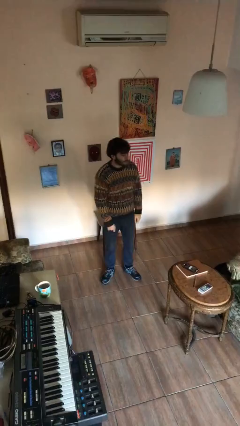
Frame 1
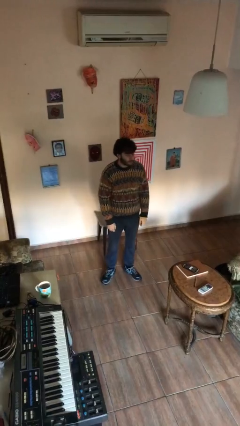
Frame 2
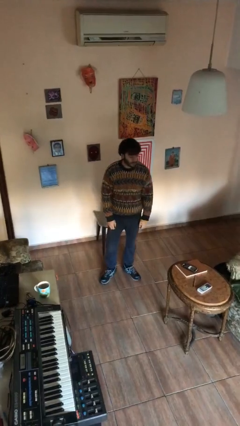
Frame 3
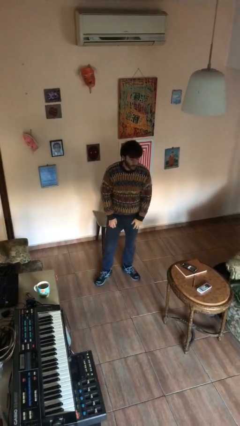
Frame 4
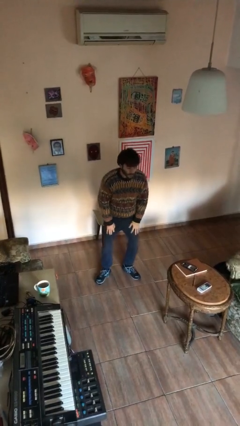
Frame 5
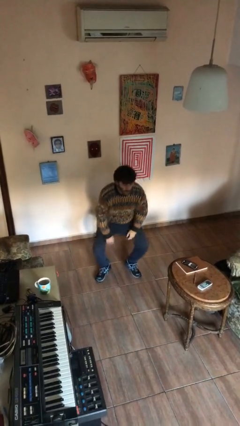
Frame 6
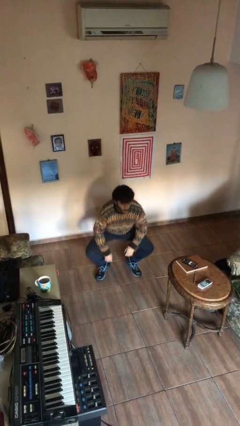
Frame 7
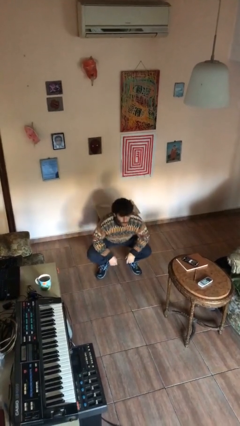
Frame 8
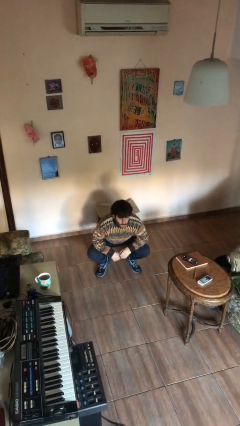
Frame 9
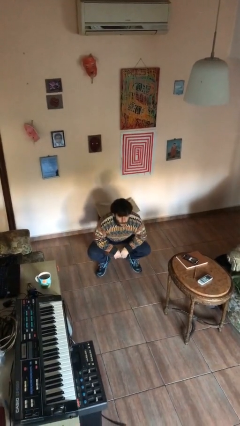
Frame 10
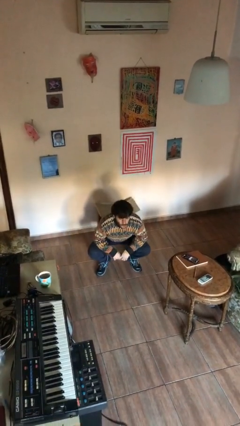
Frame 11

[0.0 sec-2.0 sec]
person squats

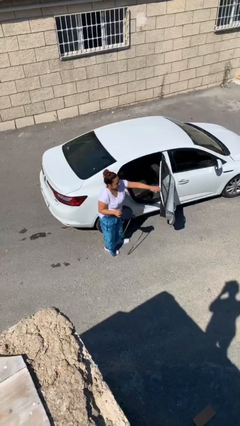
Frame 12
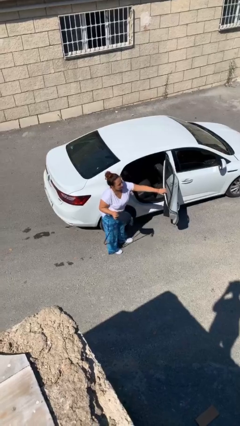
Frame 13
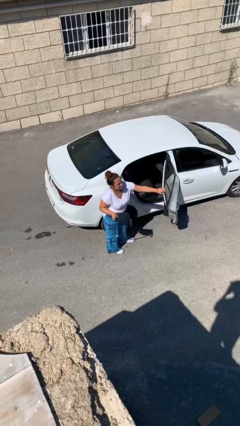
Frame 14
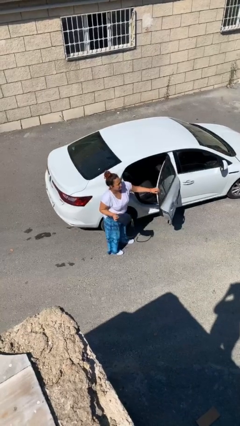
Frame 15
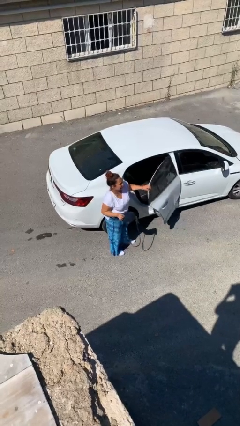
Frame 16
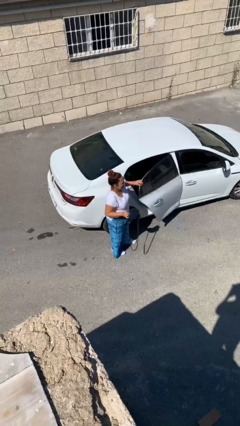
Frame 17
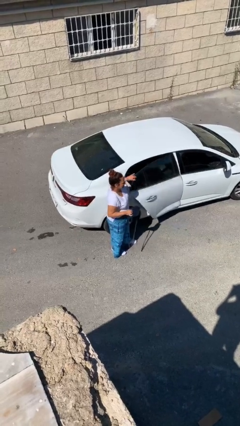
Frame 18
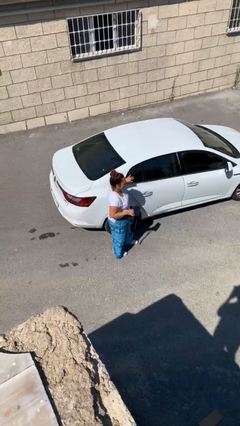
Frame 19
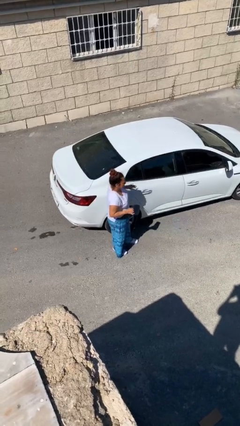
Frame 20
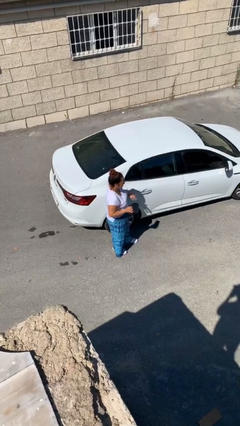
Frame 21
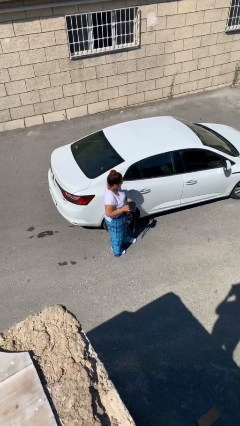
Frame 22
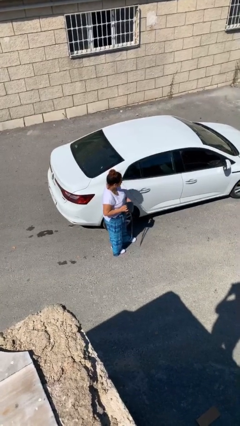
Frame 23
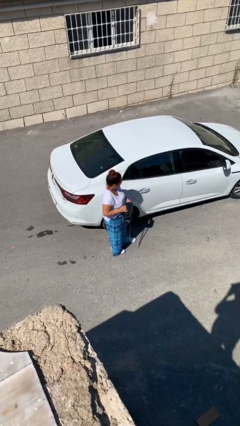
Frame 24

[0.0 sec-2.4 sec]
person closes car door

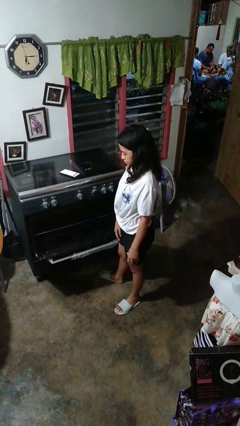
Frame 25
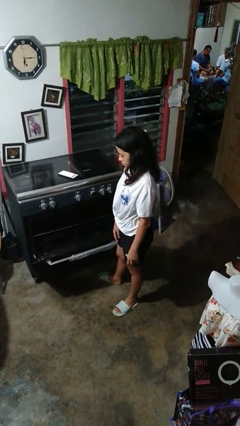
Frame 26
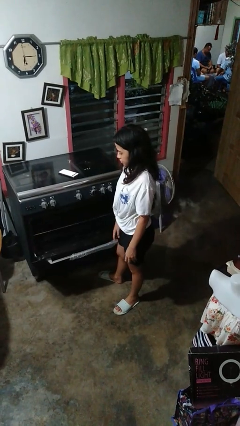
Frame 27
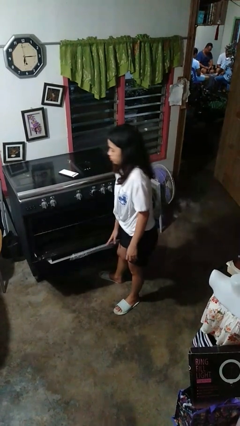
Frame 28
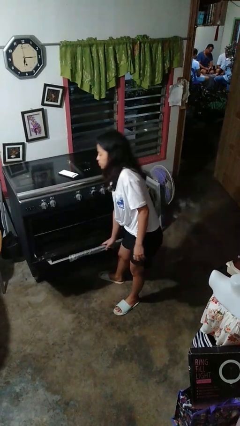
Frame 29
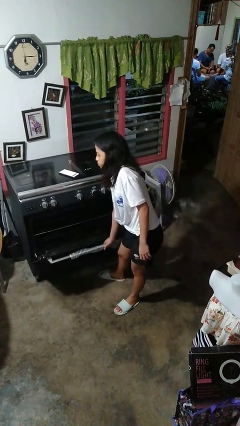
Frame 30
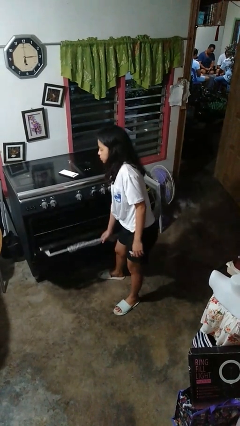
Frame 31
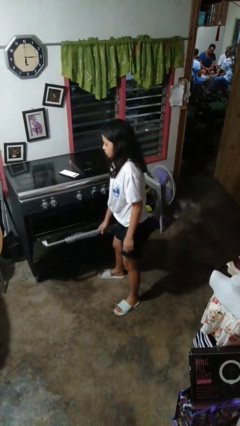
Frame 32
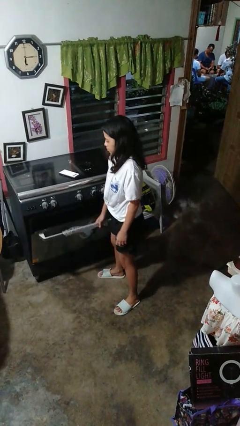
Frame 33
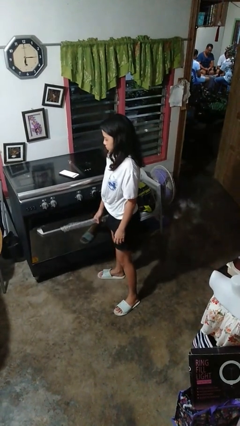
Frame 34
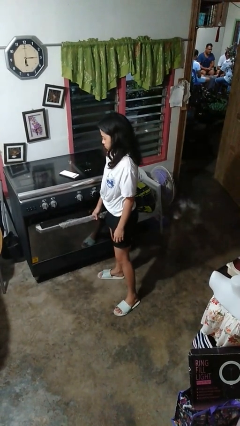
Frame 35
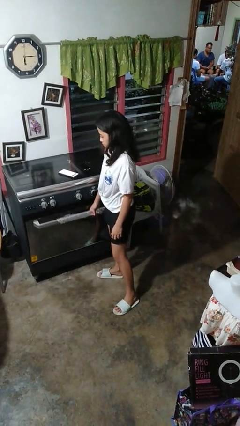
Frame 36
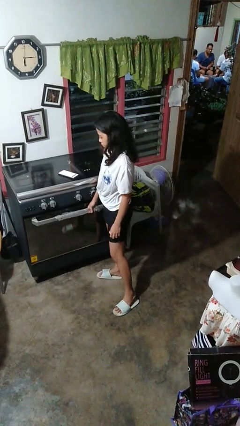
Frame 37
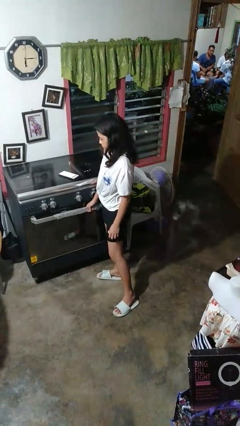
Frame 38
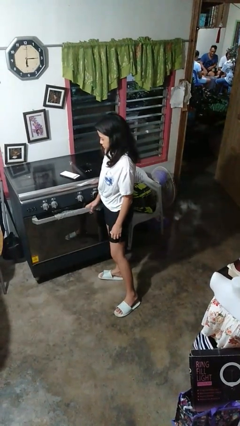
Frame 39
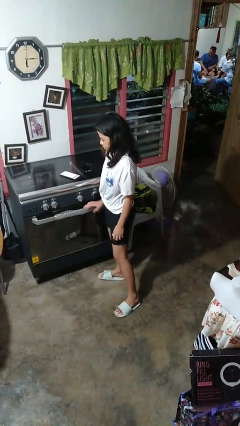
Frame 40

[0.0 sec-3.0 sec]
person closes oven door

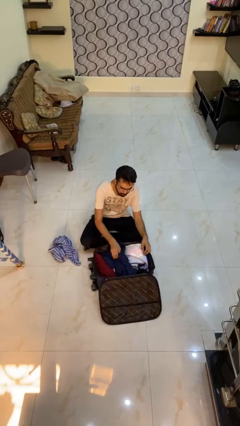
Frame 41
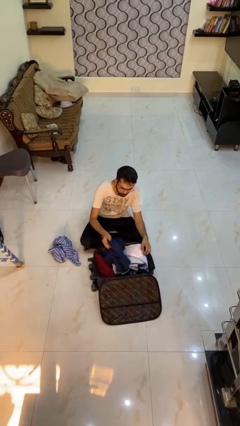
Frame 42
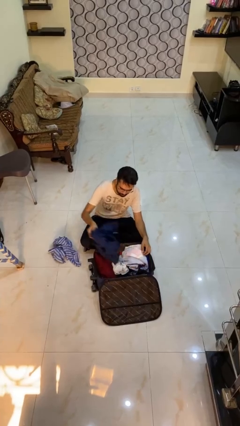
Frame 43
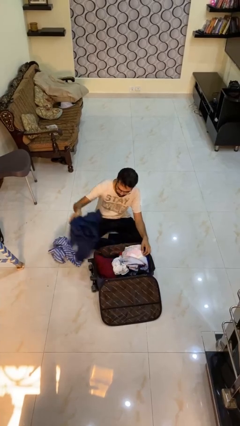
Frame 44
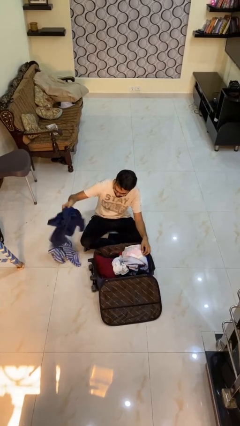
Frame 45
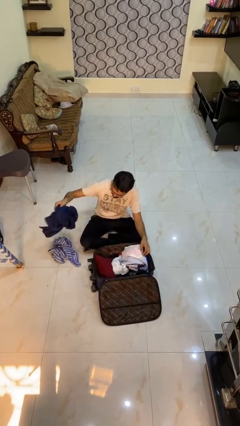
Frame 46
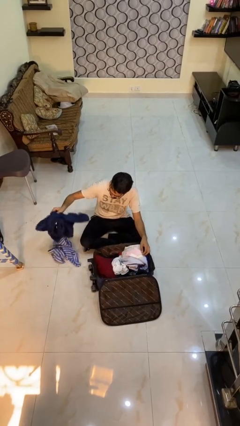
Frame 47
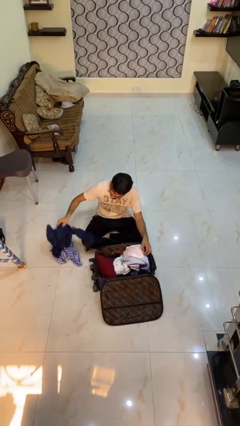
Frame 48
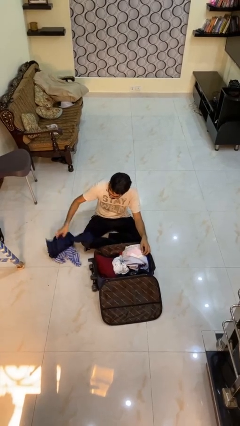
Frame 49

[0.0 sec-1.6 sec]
person unloads clothes from suitcase

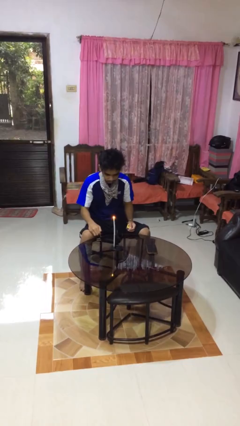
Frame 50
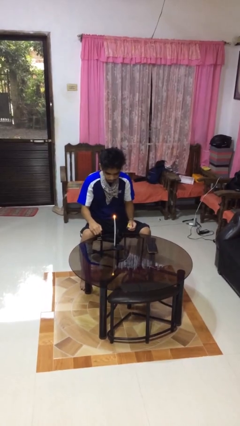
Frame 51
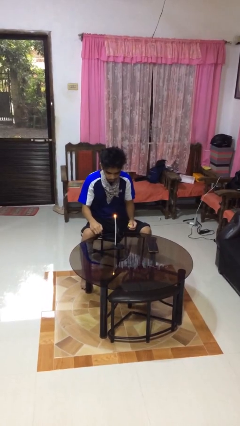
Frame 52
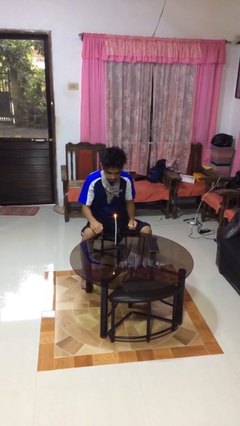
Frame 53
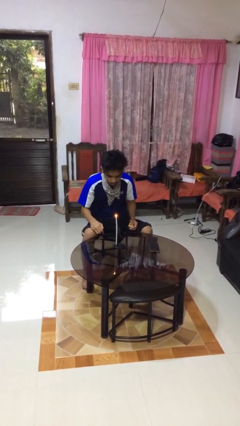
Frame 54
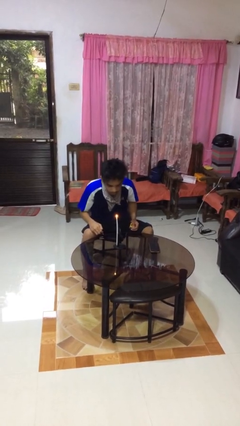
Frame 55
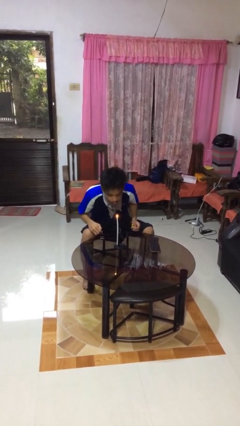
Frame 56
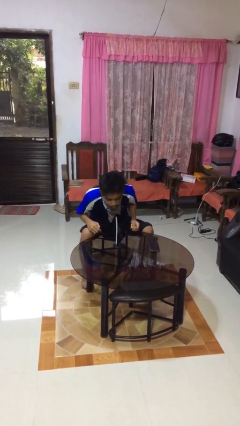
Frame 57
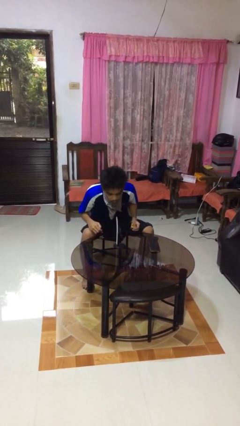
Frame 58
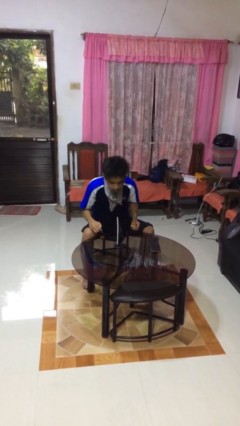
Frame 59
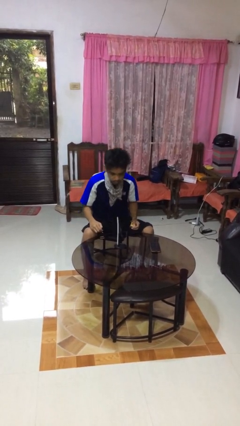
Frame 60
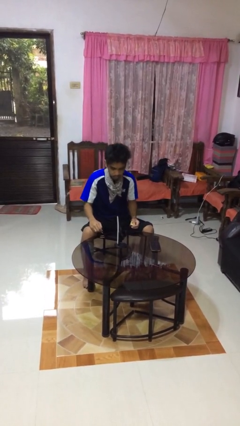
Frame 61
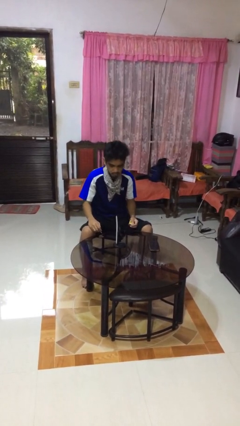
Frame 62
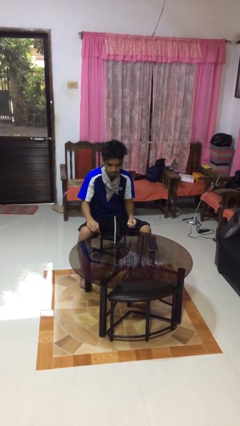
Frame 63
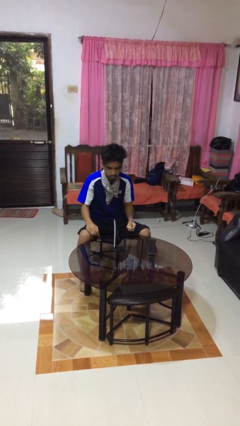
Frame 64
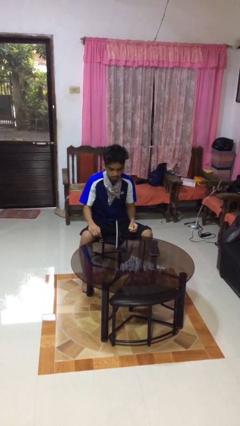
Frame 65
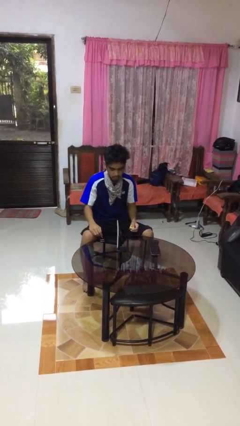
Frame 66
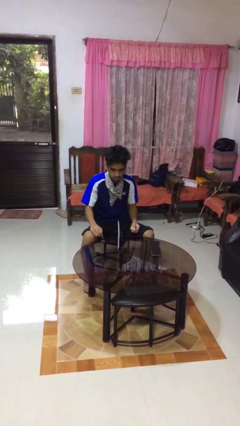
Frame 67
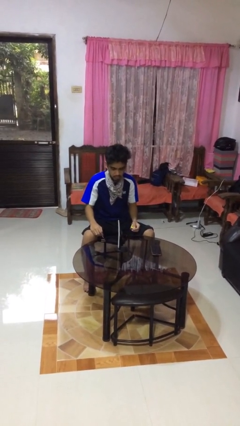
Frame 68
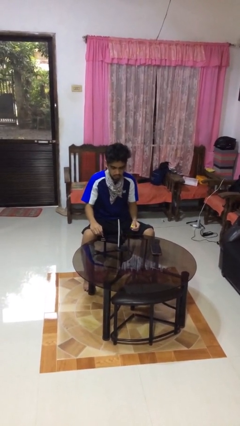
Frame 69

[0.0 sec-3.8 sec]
person extinguishes candle

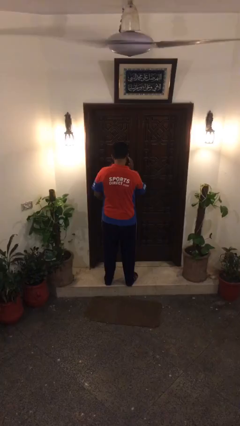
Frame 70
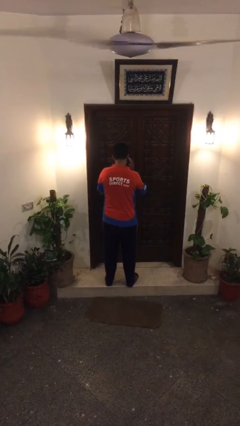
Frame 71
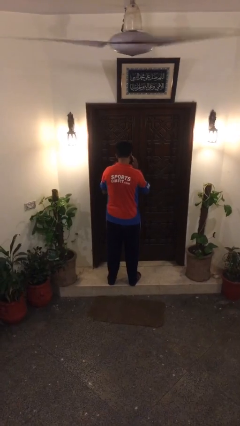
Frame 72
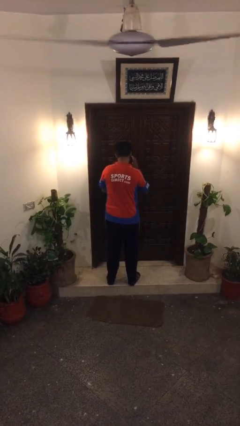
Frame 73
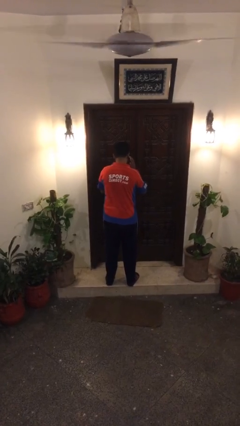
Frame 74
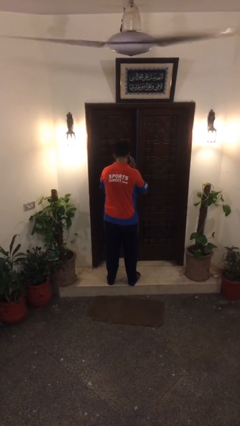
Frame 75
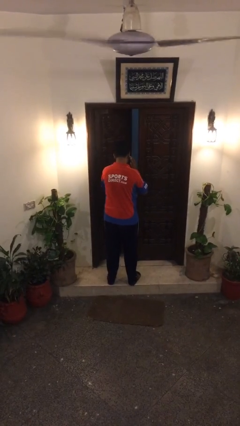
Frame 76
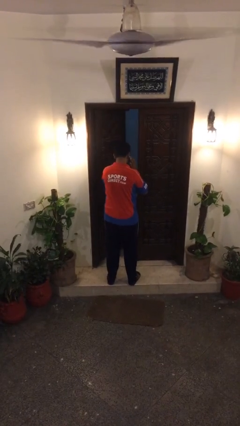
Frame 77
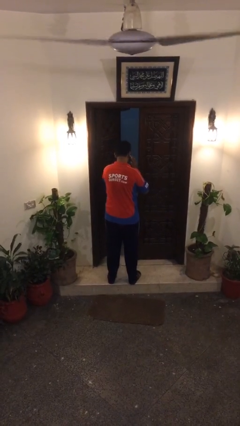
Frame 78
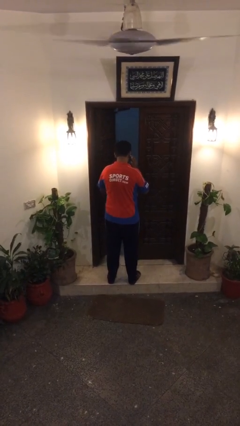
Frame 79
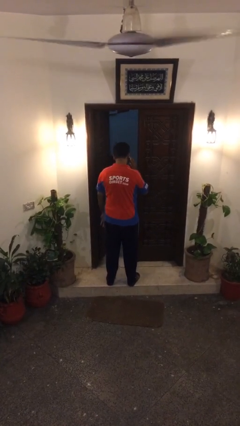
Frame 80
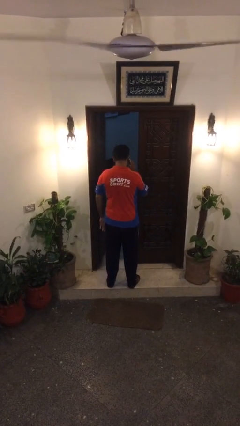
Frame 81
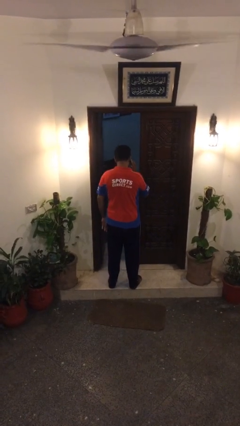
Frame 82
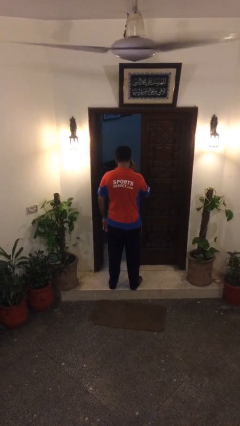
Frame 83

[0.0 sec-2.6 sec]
person opens facility door

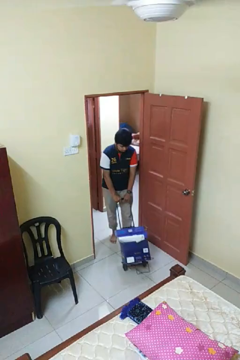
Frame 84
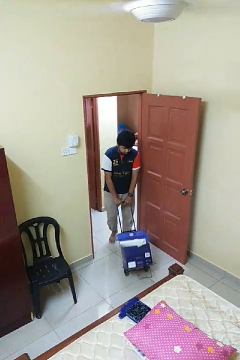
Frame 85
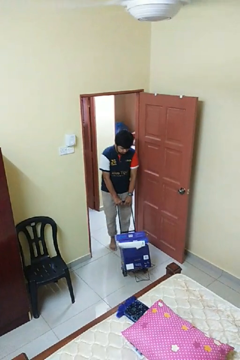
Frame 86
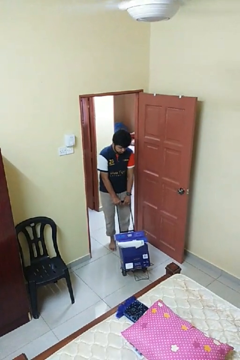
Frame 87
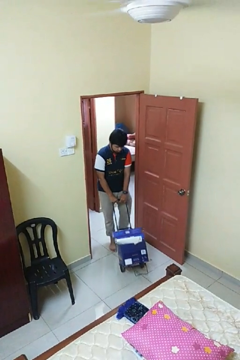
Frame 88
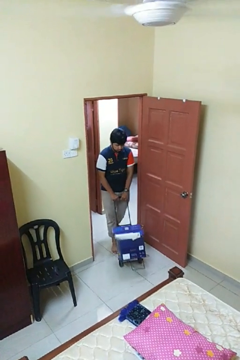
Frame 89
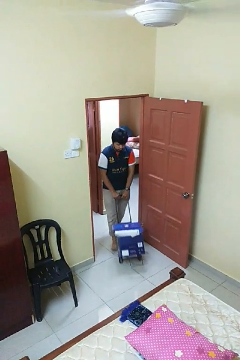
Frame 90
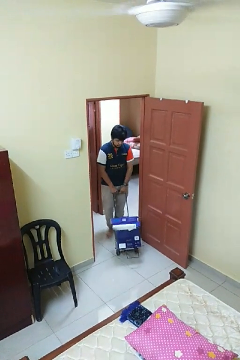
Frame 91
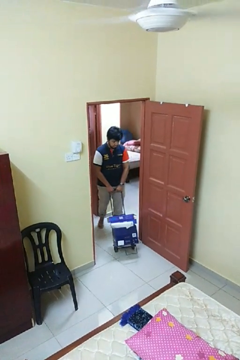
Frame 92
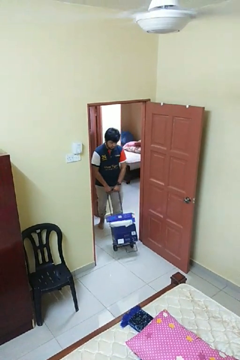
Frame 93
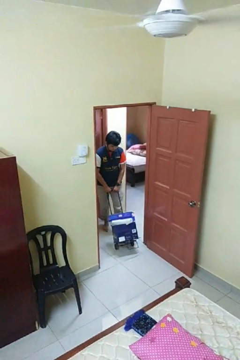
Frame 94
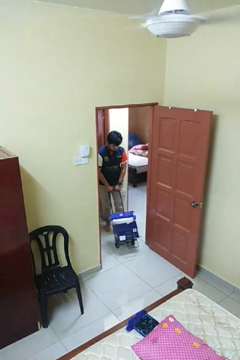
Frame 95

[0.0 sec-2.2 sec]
person pulls wheeled cart

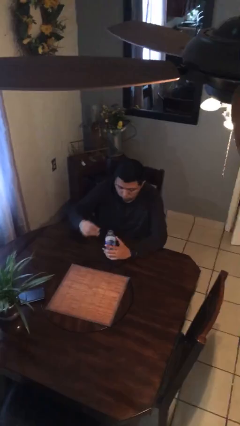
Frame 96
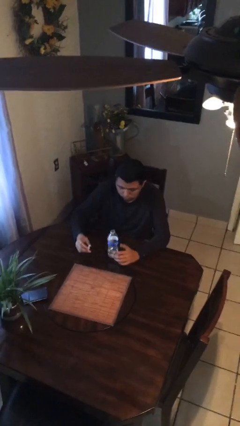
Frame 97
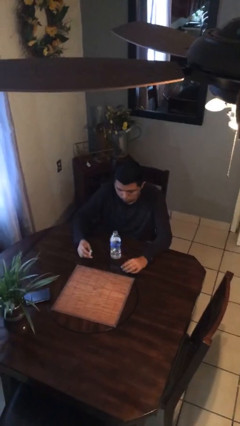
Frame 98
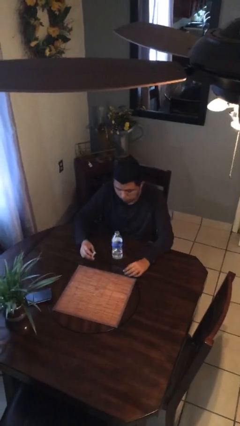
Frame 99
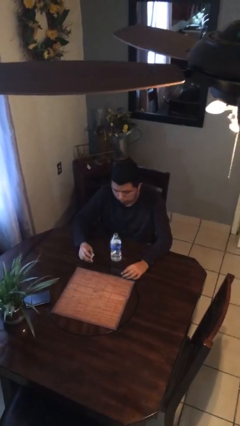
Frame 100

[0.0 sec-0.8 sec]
person unscrews lid from bottle
